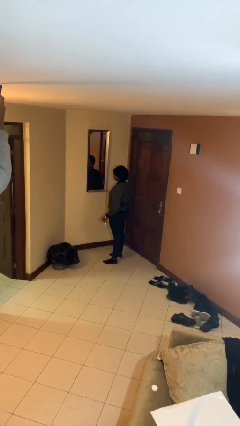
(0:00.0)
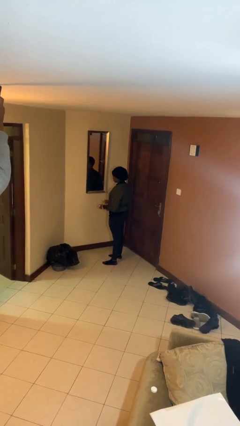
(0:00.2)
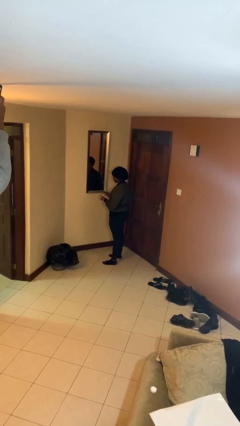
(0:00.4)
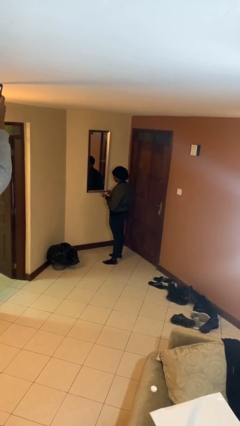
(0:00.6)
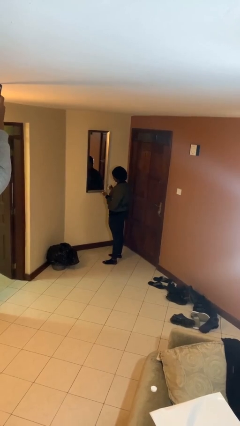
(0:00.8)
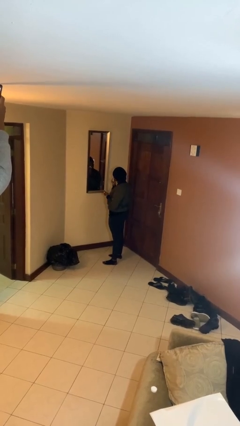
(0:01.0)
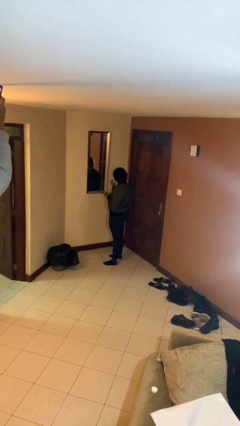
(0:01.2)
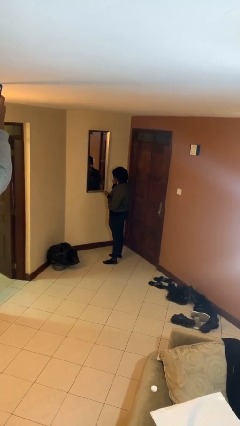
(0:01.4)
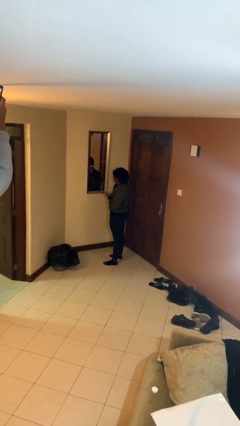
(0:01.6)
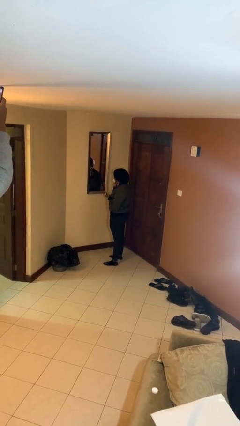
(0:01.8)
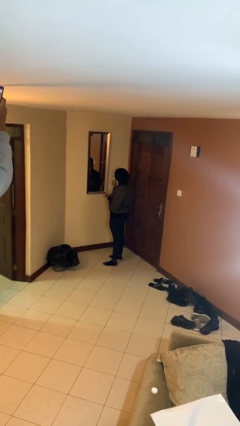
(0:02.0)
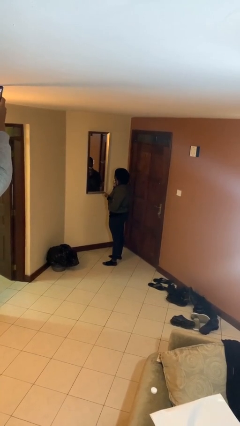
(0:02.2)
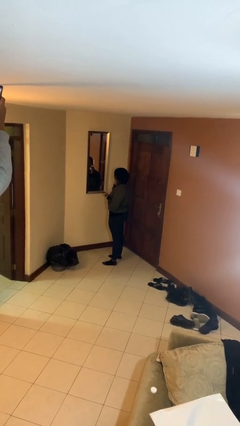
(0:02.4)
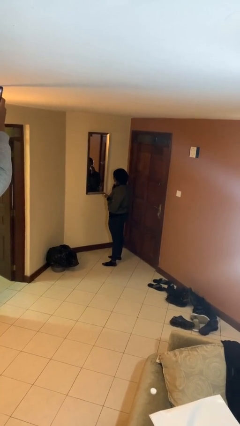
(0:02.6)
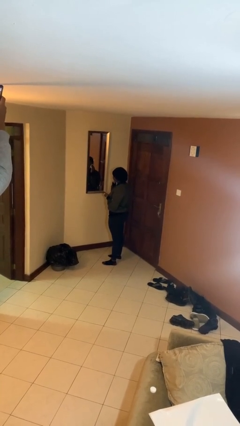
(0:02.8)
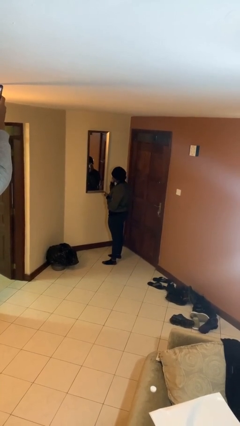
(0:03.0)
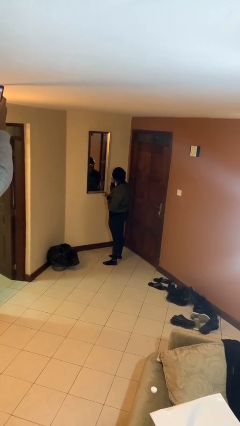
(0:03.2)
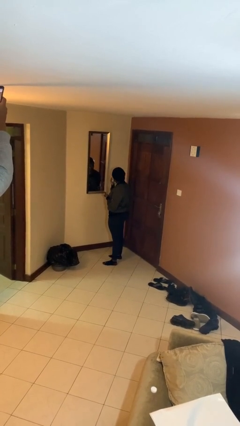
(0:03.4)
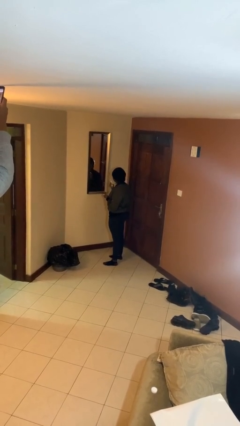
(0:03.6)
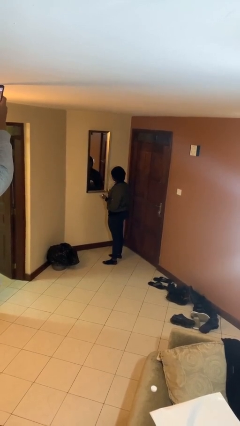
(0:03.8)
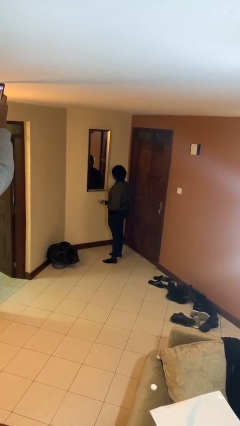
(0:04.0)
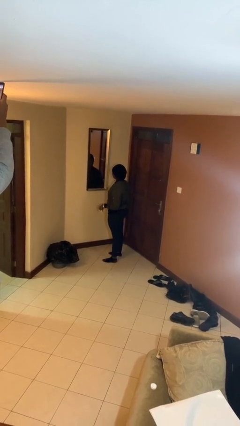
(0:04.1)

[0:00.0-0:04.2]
person applies foundation makeup

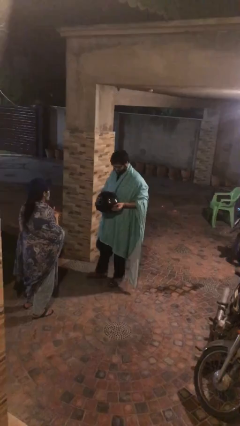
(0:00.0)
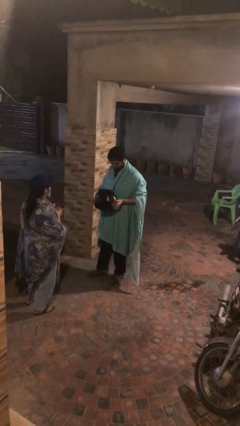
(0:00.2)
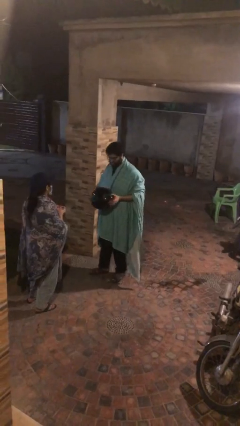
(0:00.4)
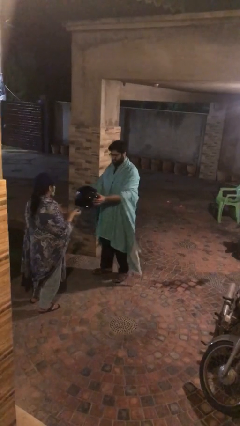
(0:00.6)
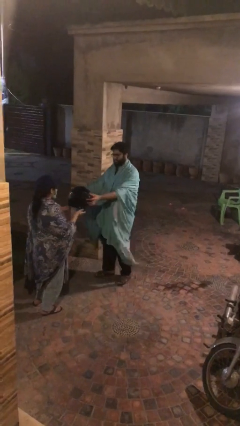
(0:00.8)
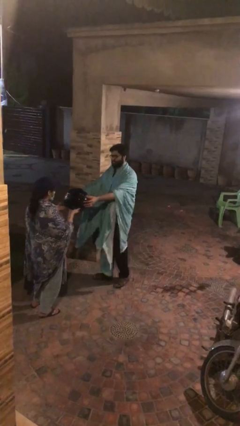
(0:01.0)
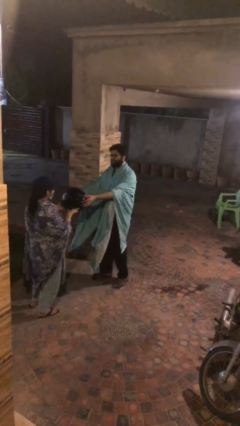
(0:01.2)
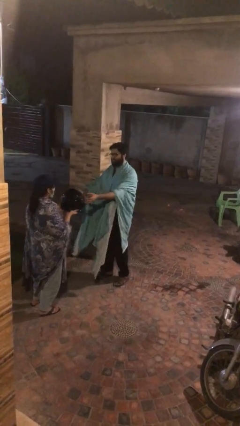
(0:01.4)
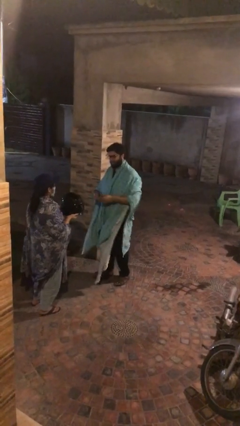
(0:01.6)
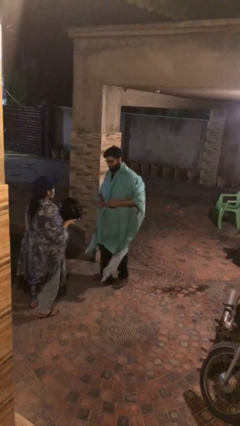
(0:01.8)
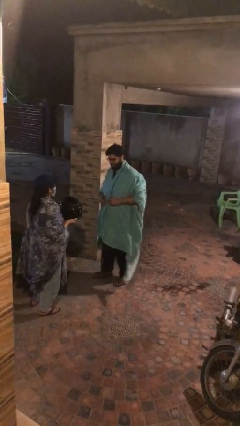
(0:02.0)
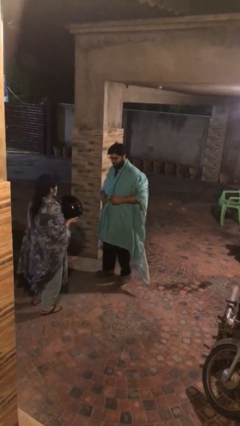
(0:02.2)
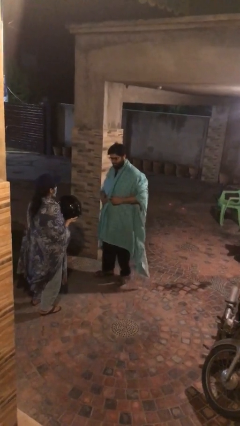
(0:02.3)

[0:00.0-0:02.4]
person transfers object to person

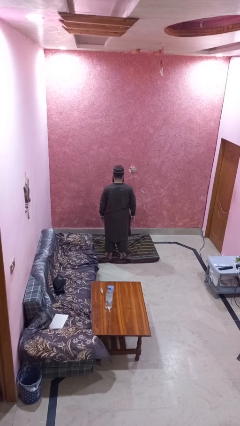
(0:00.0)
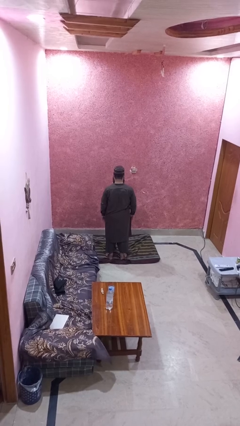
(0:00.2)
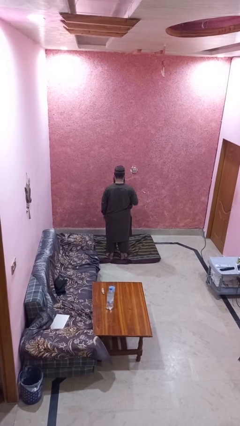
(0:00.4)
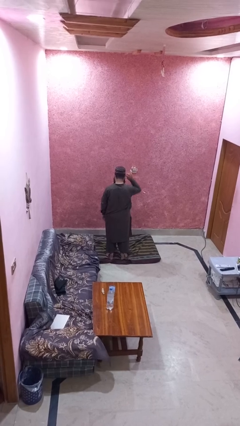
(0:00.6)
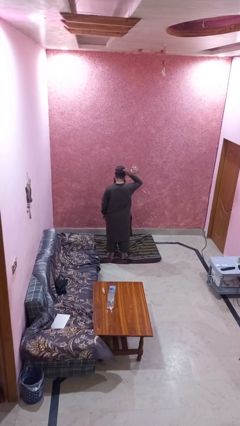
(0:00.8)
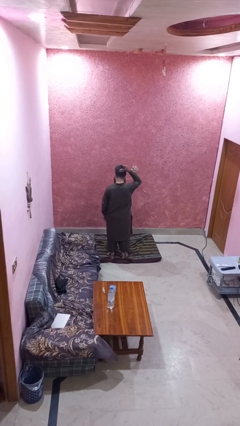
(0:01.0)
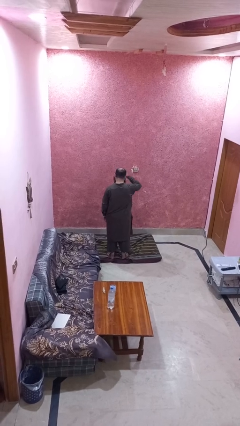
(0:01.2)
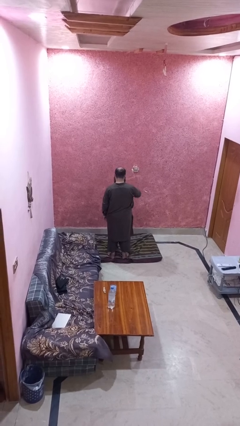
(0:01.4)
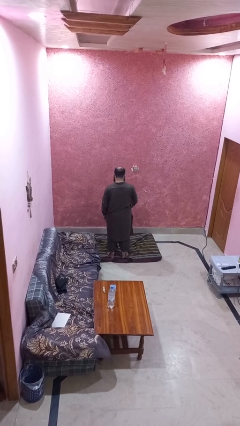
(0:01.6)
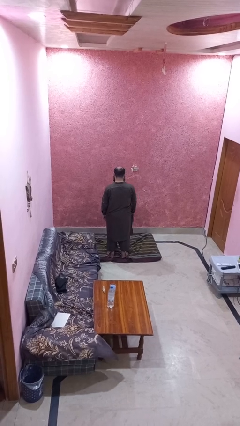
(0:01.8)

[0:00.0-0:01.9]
person takes off hat

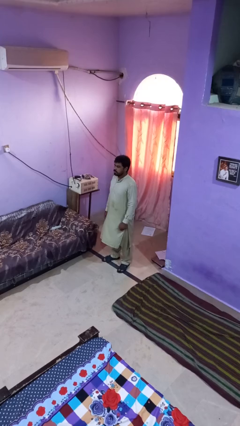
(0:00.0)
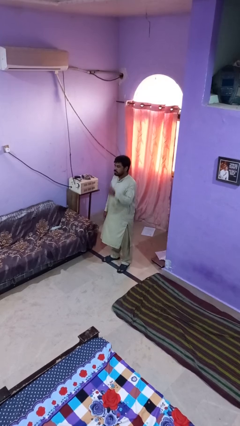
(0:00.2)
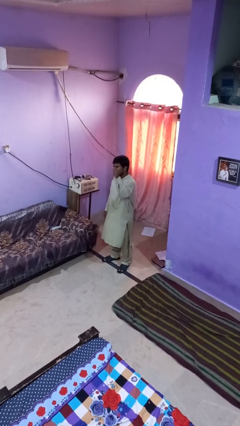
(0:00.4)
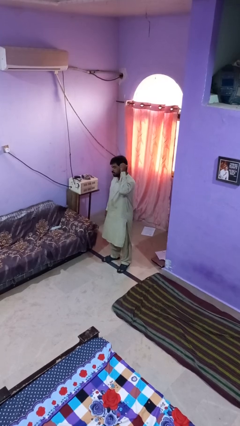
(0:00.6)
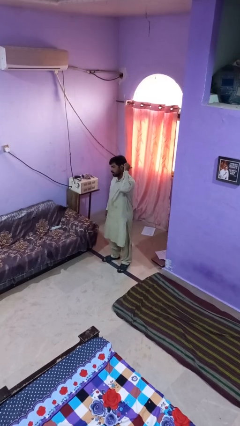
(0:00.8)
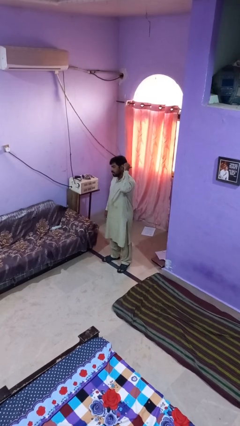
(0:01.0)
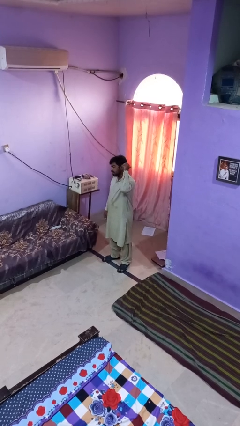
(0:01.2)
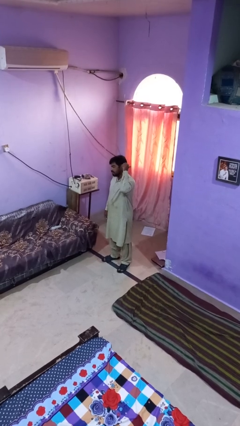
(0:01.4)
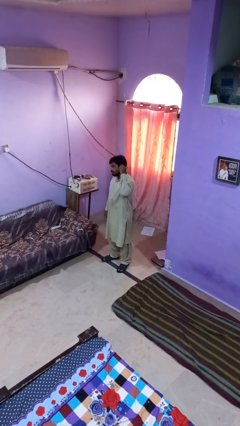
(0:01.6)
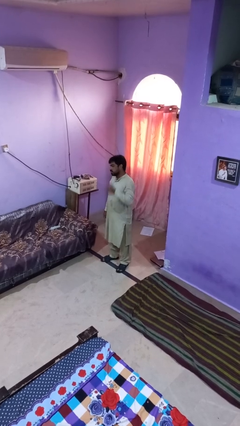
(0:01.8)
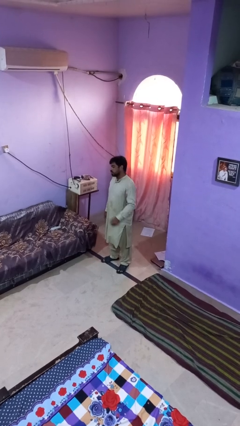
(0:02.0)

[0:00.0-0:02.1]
person gestures behind me

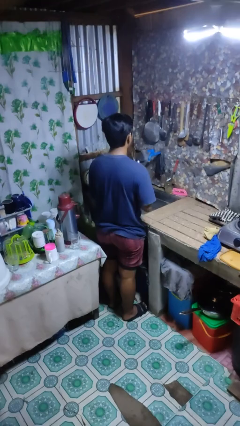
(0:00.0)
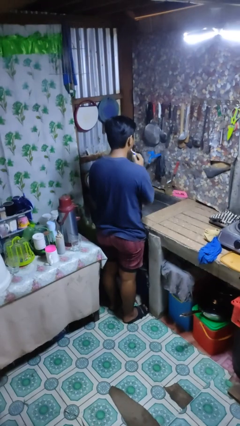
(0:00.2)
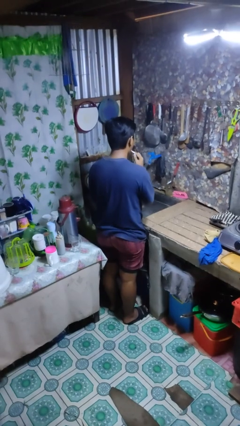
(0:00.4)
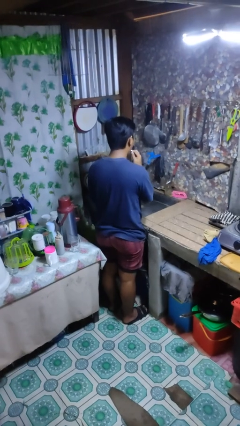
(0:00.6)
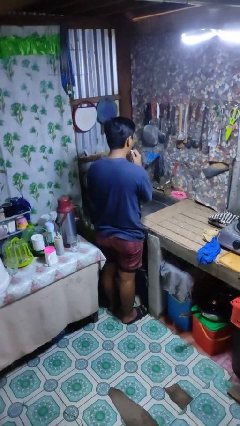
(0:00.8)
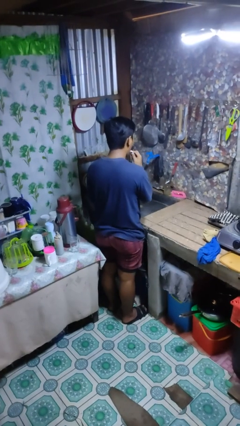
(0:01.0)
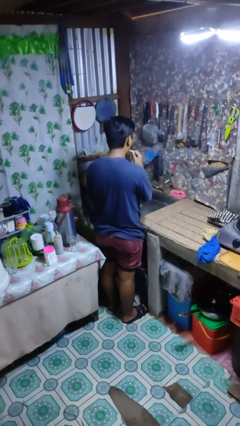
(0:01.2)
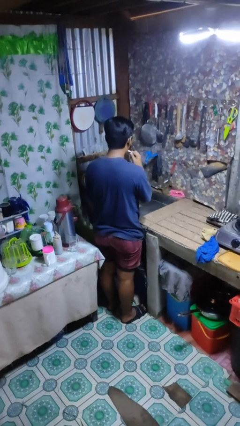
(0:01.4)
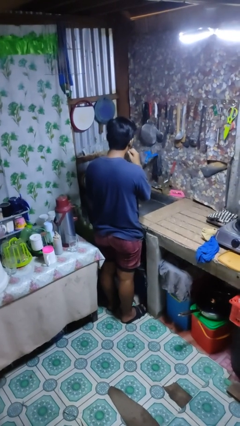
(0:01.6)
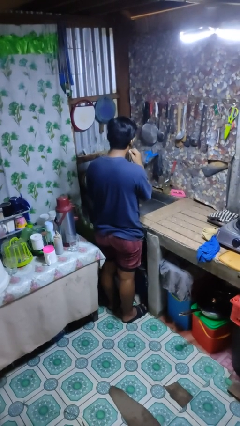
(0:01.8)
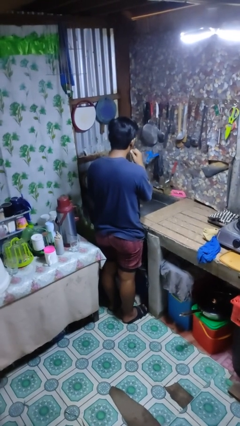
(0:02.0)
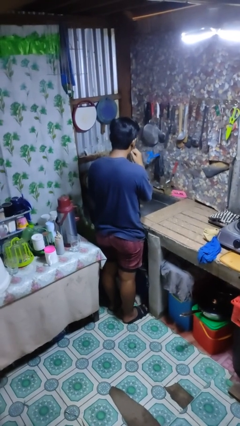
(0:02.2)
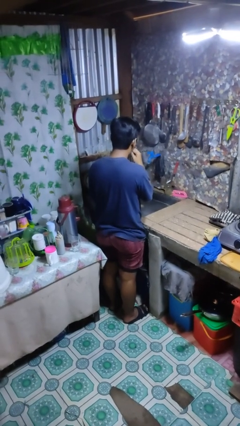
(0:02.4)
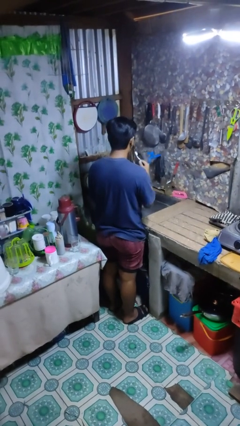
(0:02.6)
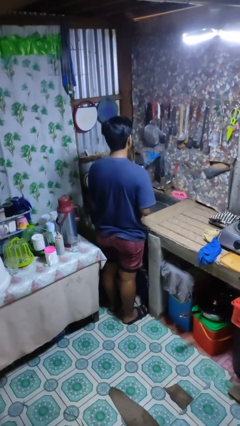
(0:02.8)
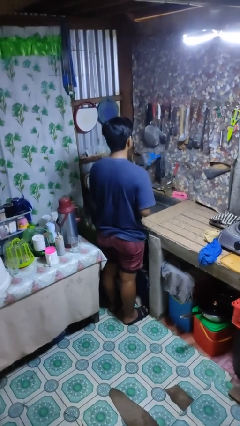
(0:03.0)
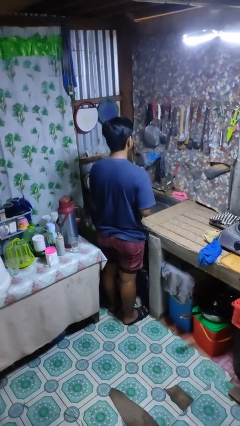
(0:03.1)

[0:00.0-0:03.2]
person brushes teeth

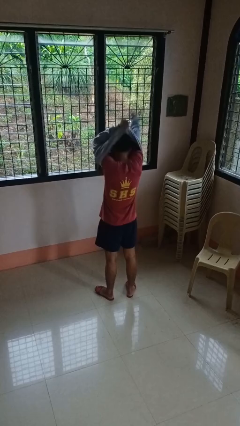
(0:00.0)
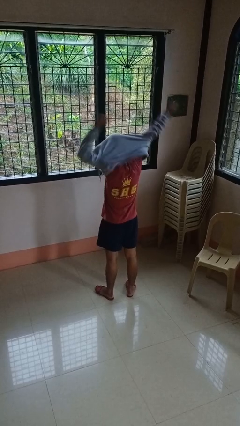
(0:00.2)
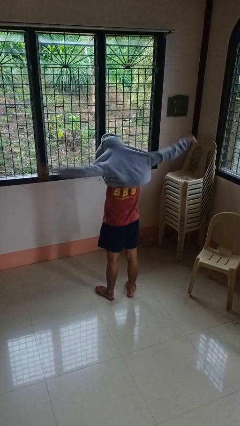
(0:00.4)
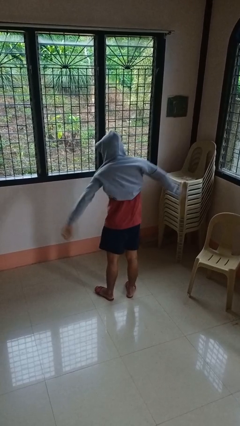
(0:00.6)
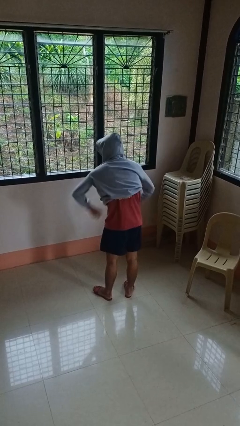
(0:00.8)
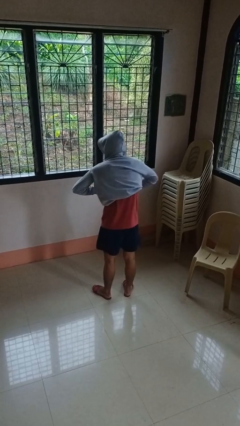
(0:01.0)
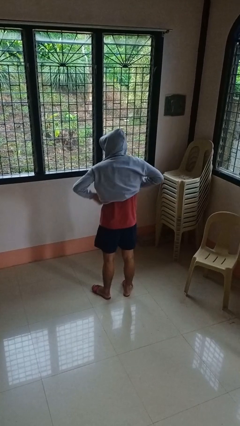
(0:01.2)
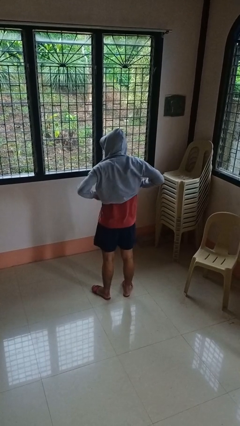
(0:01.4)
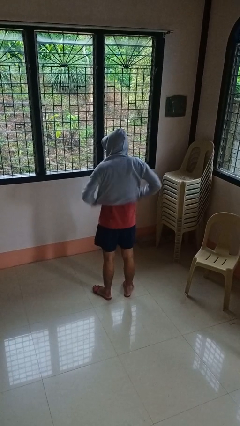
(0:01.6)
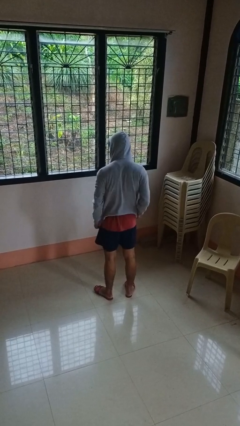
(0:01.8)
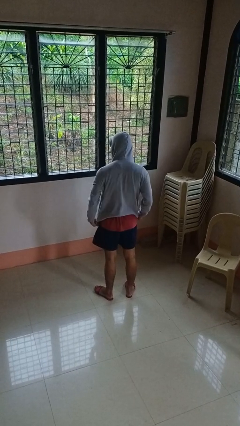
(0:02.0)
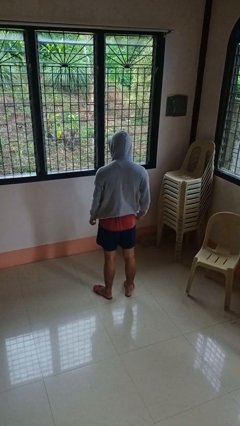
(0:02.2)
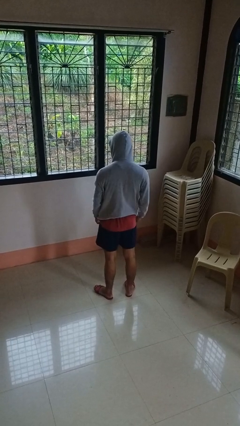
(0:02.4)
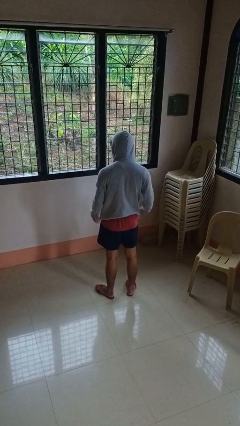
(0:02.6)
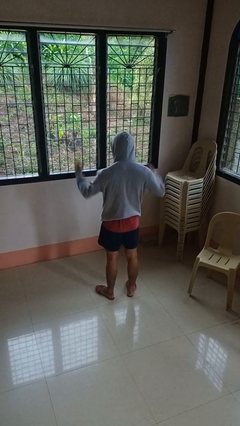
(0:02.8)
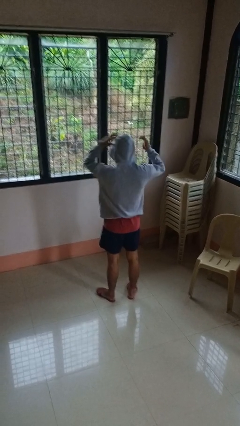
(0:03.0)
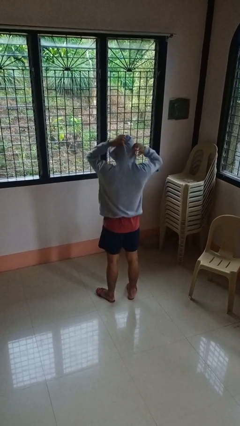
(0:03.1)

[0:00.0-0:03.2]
person puts on hoodie

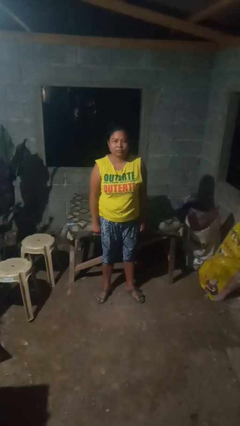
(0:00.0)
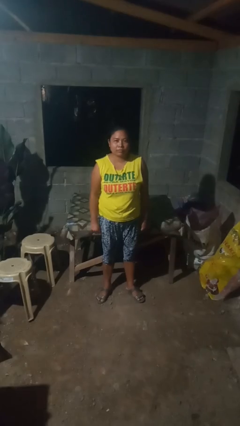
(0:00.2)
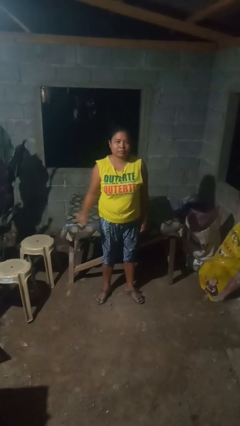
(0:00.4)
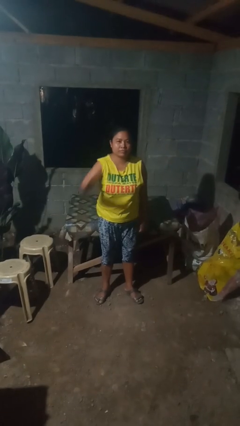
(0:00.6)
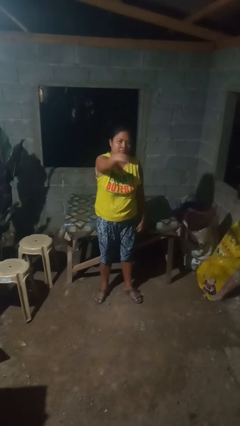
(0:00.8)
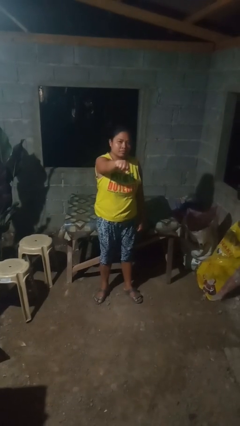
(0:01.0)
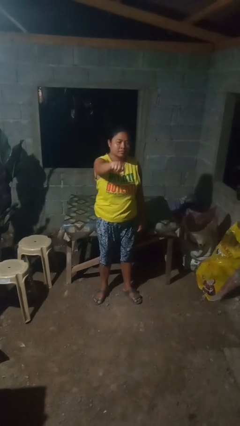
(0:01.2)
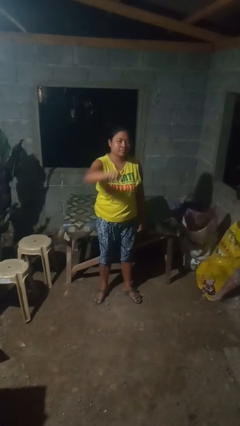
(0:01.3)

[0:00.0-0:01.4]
person punches
